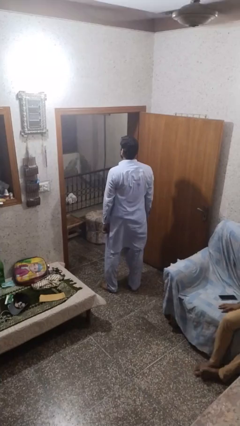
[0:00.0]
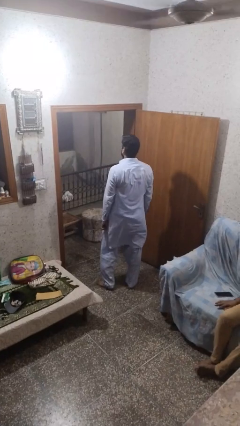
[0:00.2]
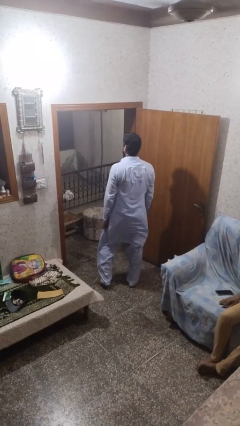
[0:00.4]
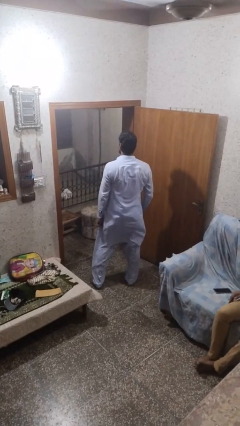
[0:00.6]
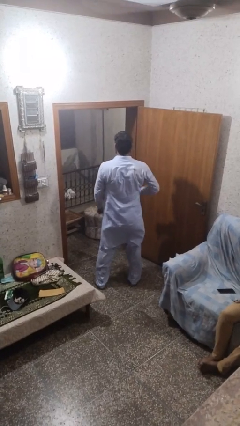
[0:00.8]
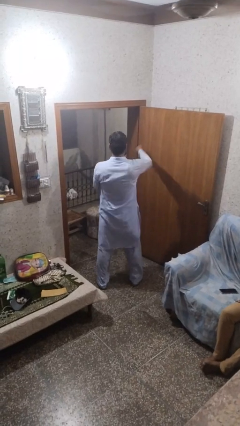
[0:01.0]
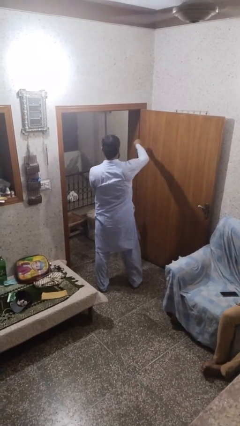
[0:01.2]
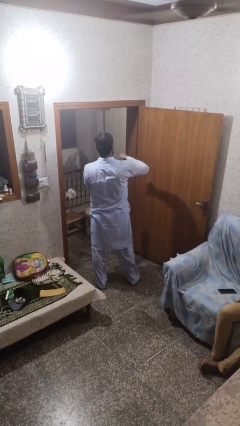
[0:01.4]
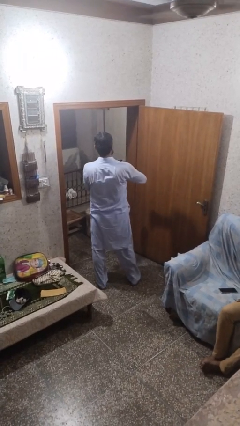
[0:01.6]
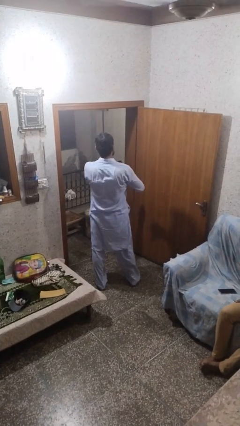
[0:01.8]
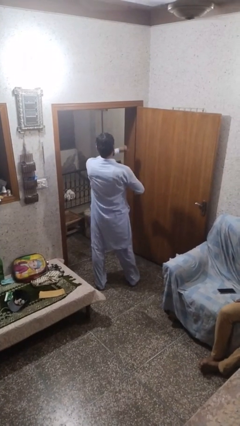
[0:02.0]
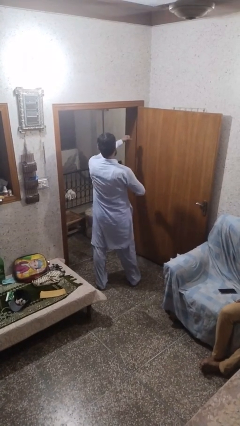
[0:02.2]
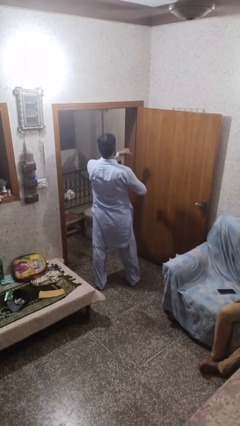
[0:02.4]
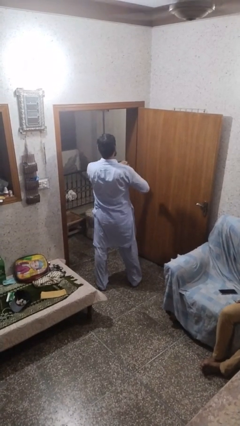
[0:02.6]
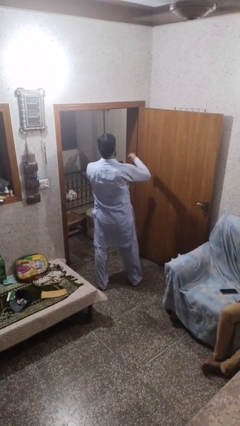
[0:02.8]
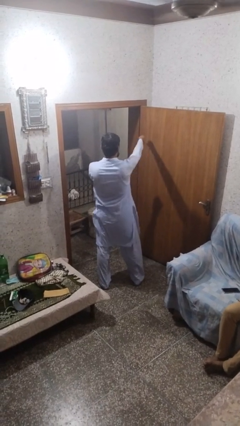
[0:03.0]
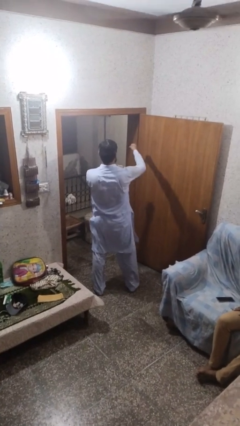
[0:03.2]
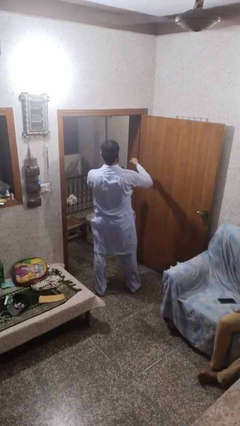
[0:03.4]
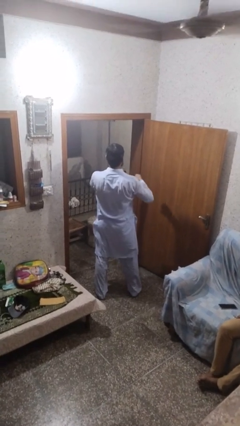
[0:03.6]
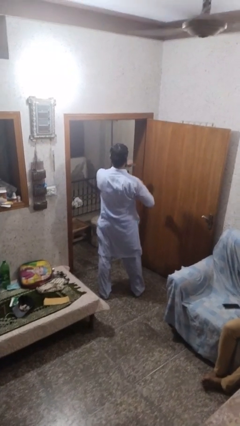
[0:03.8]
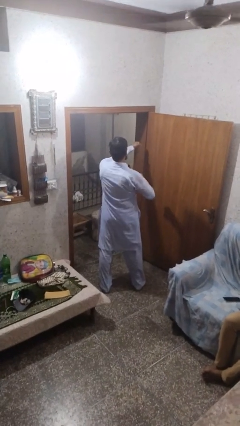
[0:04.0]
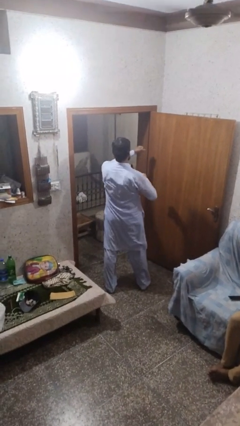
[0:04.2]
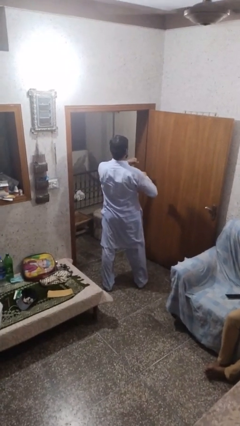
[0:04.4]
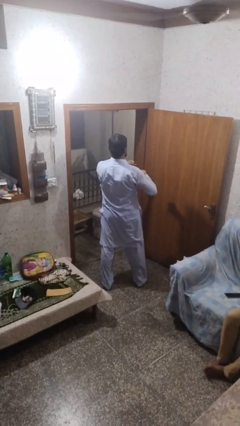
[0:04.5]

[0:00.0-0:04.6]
person punches

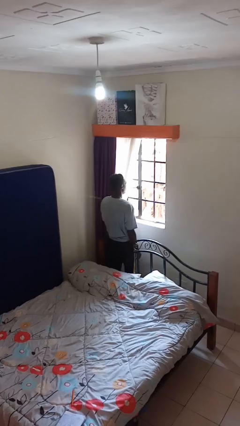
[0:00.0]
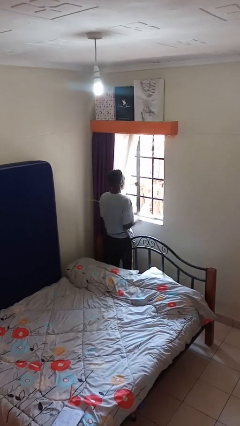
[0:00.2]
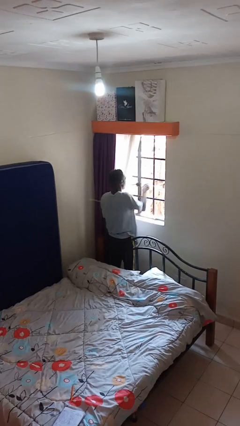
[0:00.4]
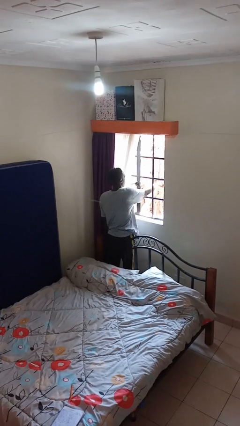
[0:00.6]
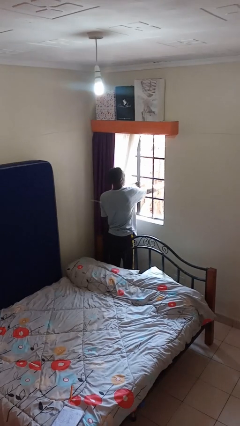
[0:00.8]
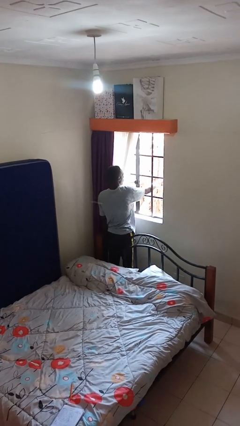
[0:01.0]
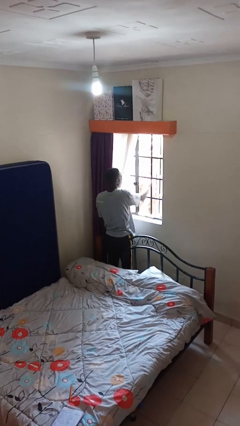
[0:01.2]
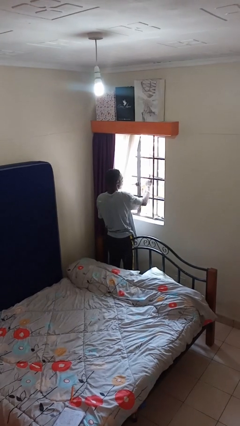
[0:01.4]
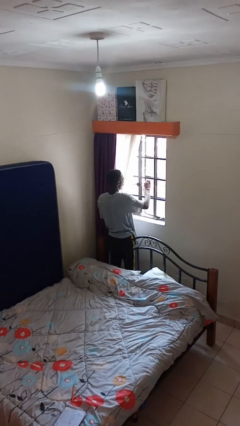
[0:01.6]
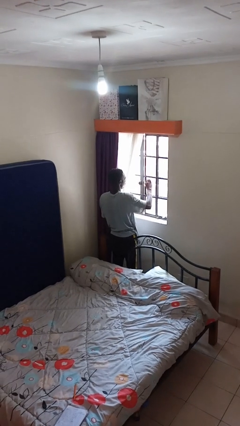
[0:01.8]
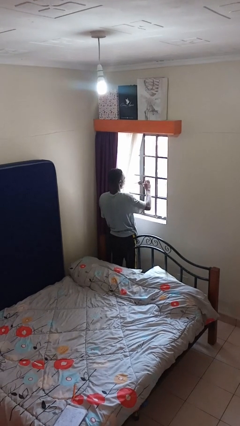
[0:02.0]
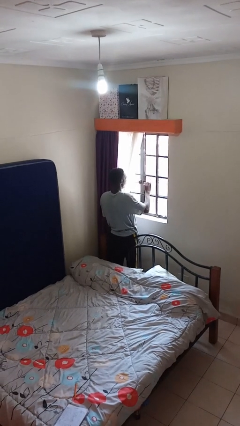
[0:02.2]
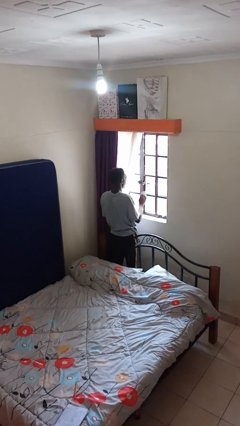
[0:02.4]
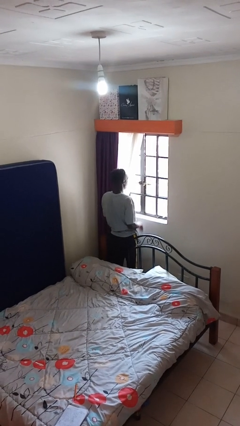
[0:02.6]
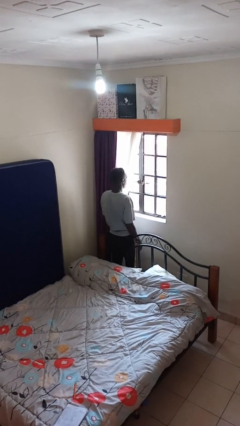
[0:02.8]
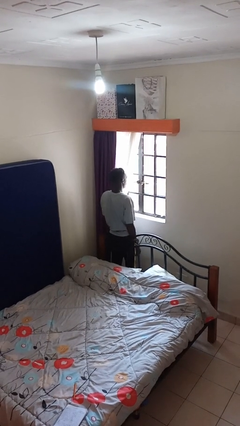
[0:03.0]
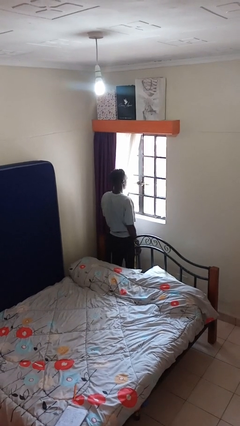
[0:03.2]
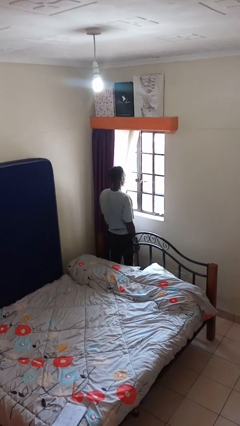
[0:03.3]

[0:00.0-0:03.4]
person closes home window

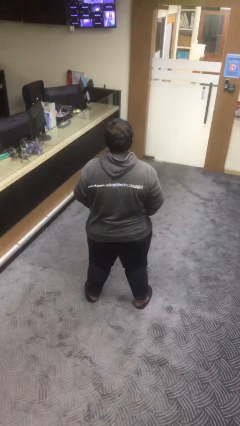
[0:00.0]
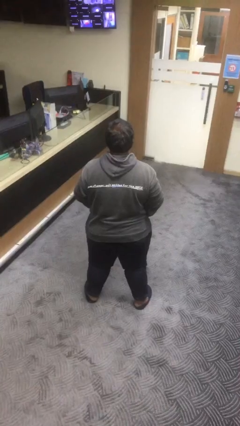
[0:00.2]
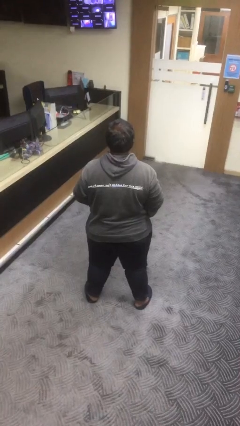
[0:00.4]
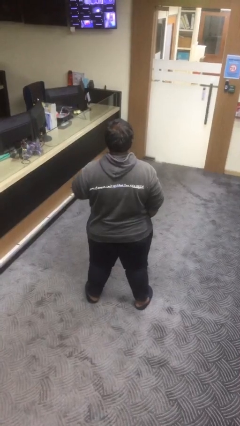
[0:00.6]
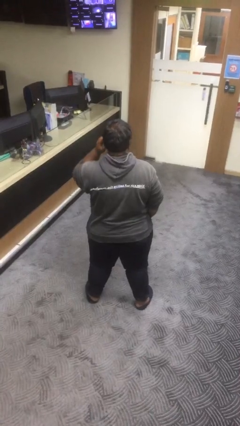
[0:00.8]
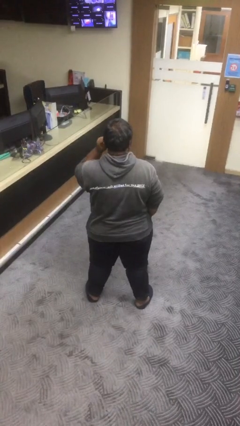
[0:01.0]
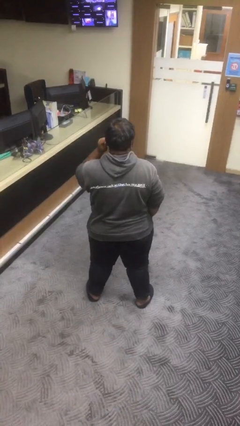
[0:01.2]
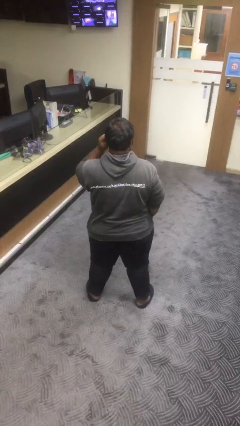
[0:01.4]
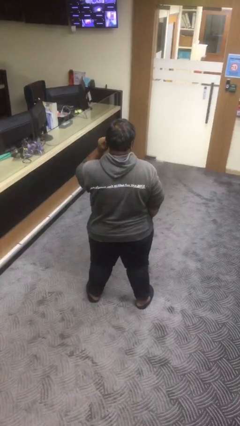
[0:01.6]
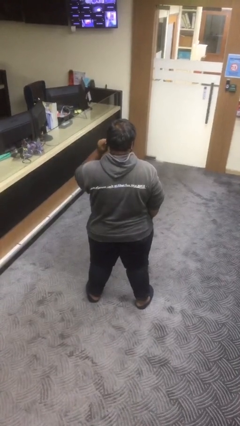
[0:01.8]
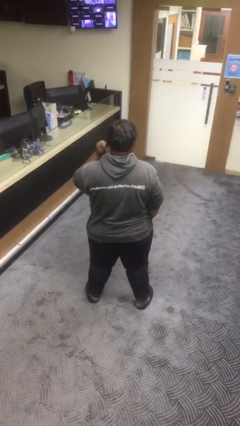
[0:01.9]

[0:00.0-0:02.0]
person touches earlobe

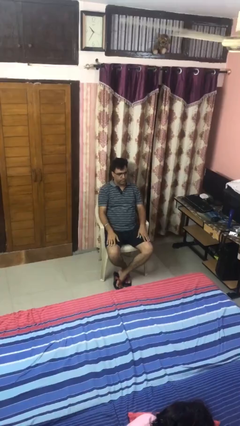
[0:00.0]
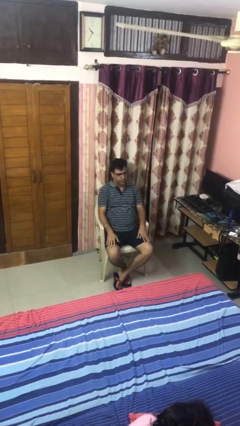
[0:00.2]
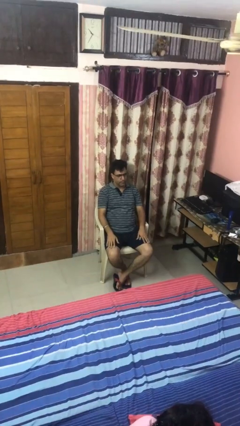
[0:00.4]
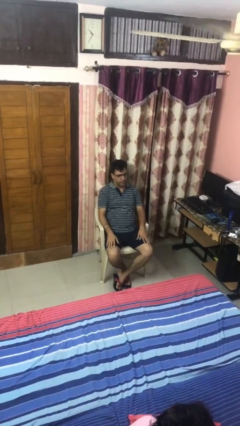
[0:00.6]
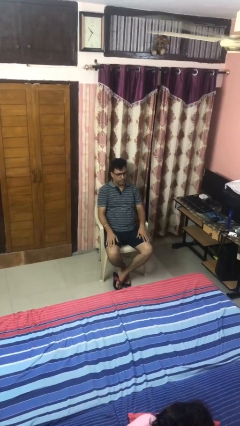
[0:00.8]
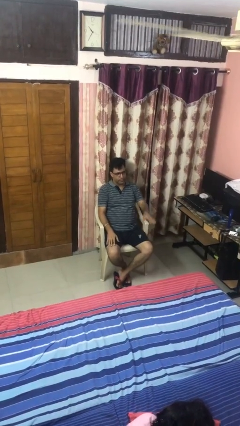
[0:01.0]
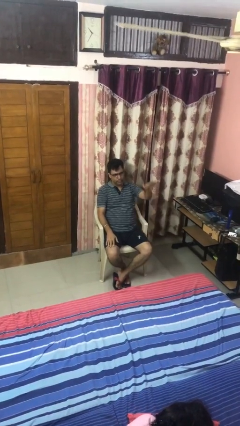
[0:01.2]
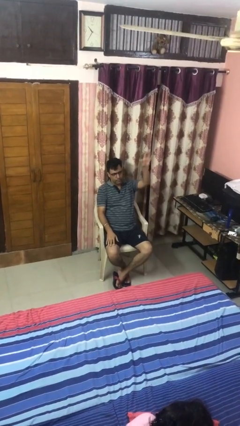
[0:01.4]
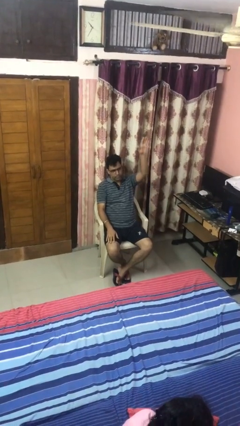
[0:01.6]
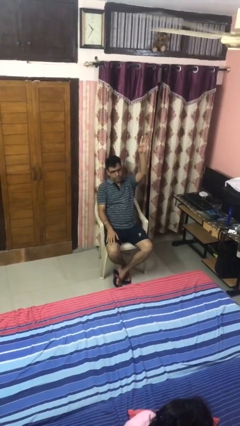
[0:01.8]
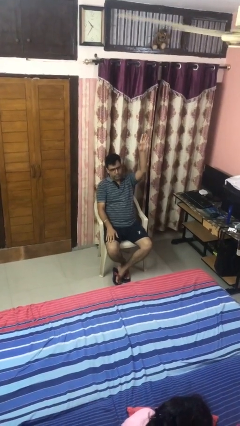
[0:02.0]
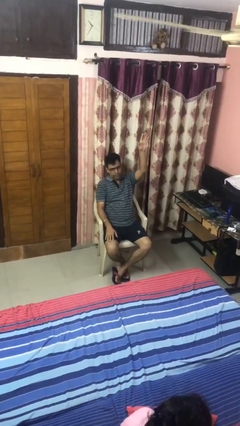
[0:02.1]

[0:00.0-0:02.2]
person gestures raise hand

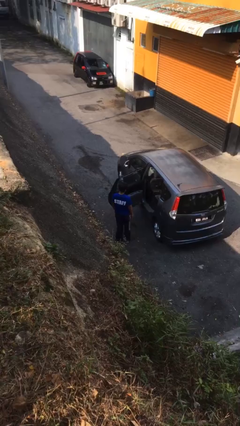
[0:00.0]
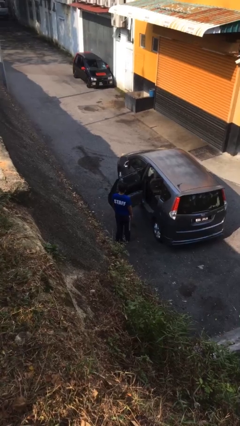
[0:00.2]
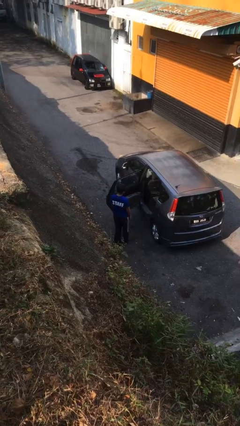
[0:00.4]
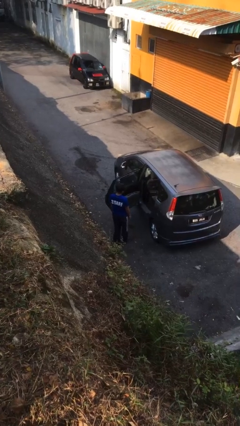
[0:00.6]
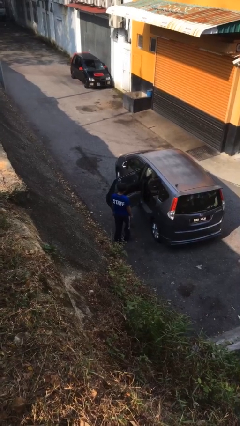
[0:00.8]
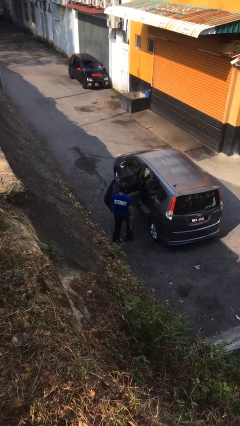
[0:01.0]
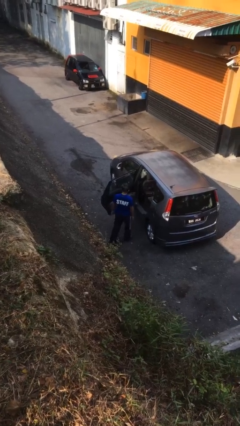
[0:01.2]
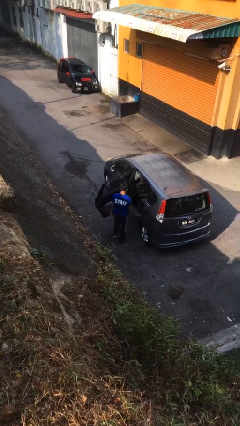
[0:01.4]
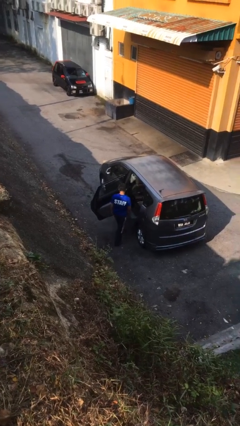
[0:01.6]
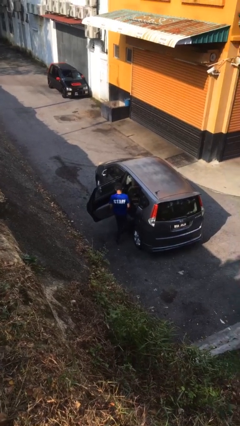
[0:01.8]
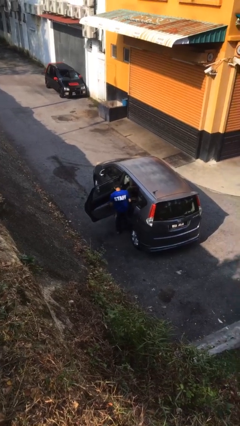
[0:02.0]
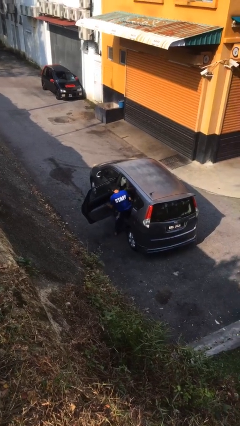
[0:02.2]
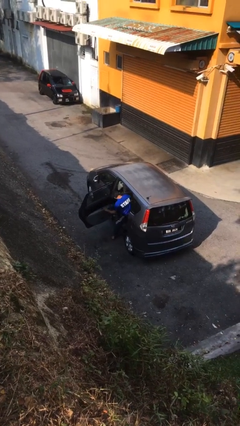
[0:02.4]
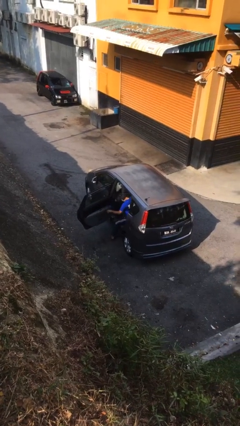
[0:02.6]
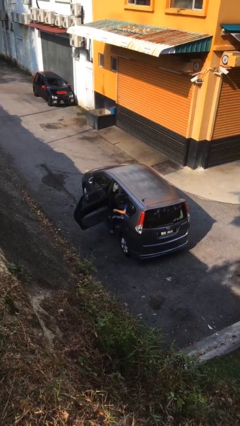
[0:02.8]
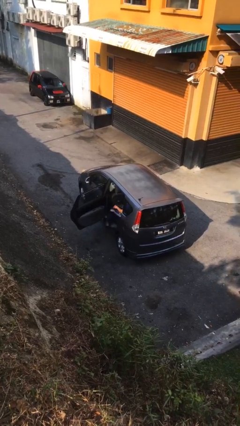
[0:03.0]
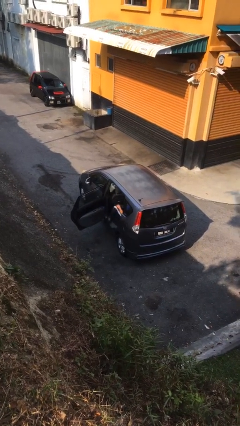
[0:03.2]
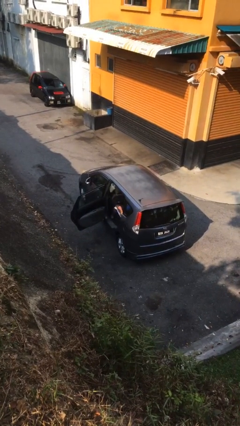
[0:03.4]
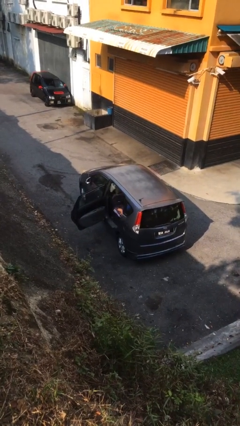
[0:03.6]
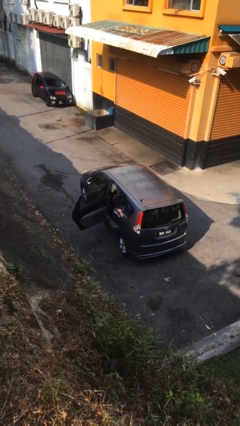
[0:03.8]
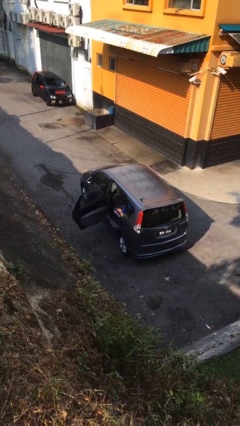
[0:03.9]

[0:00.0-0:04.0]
person enters car

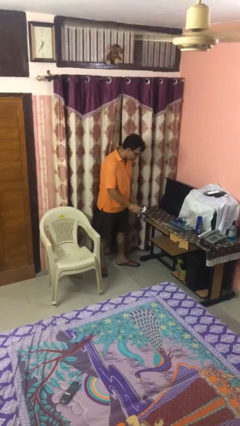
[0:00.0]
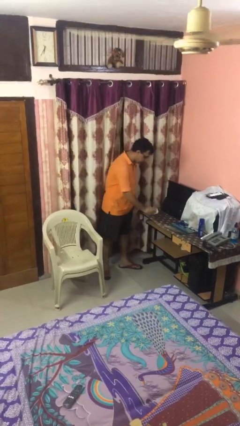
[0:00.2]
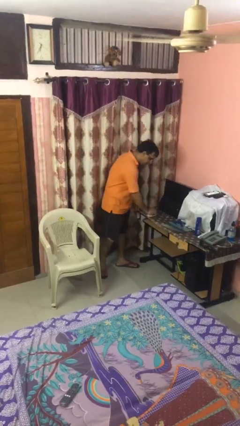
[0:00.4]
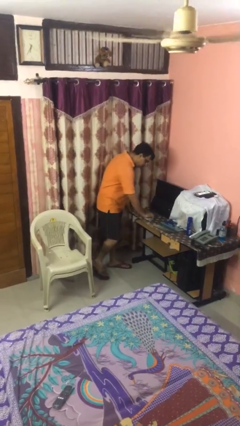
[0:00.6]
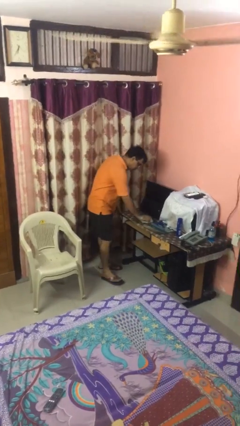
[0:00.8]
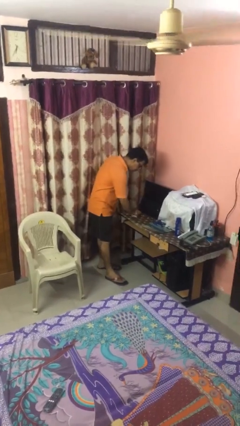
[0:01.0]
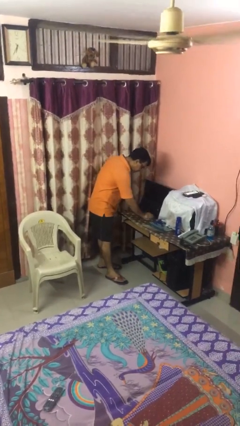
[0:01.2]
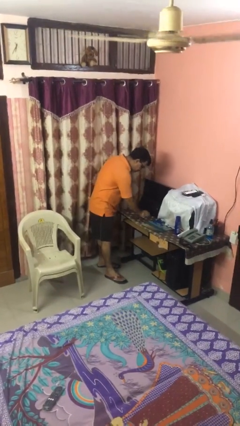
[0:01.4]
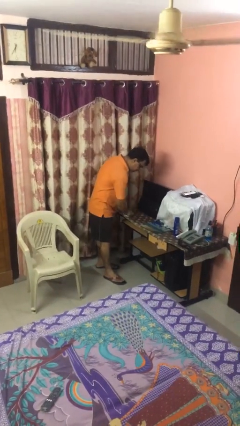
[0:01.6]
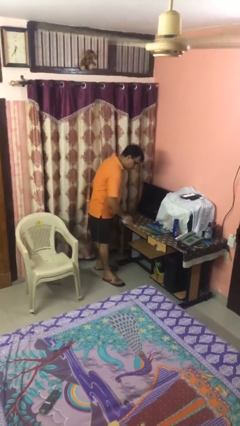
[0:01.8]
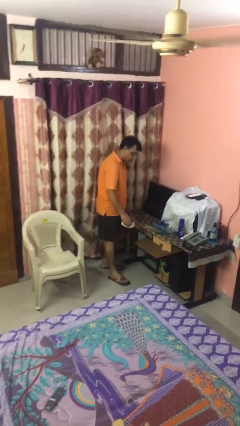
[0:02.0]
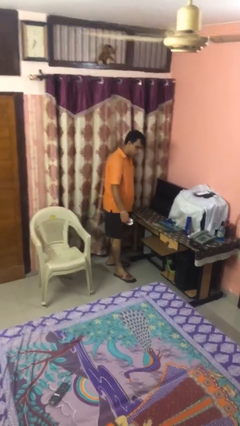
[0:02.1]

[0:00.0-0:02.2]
person cleans table with rag
